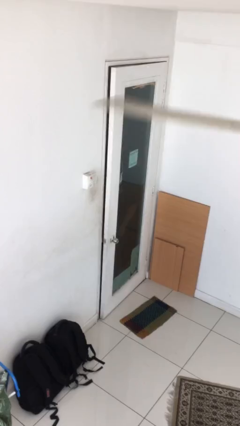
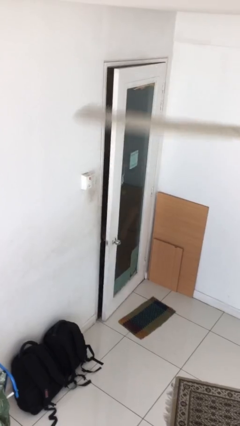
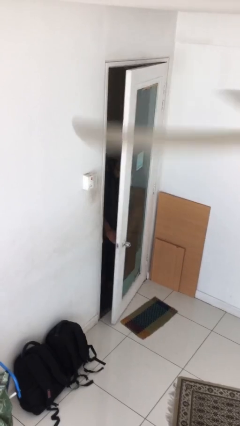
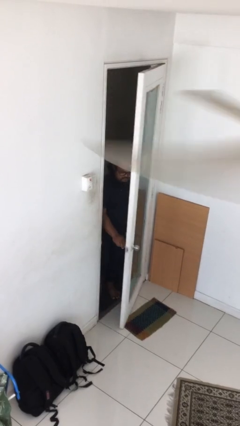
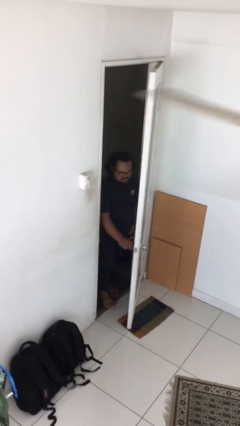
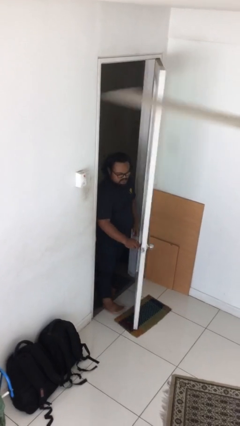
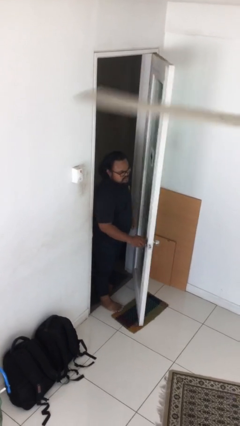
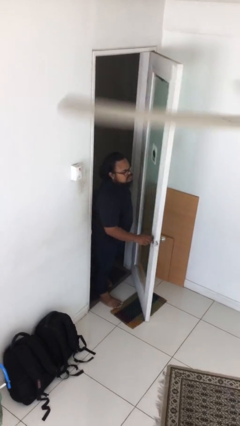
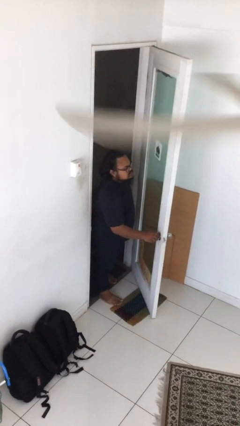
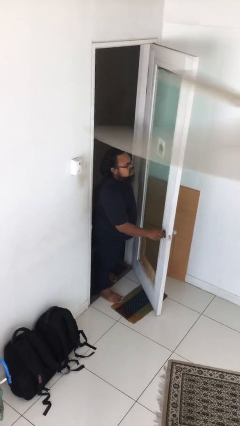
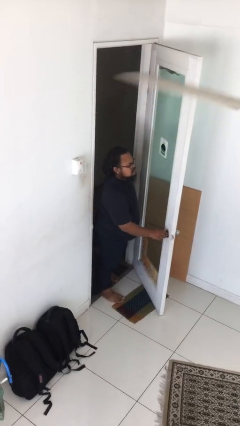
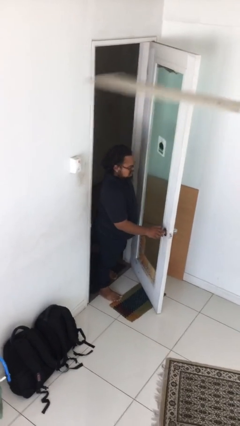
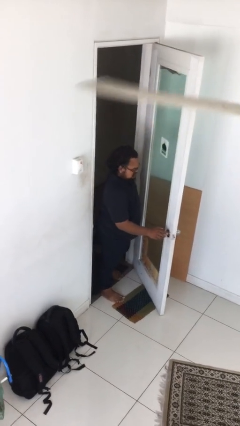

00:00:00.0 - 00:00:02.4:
person opens facility door

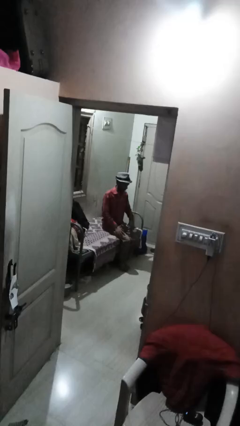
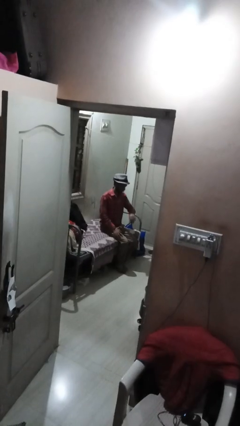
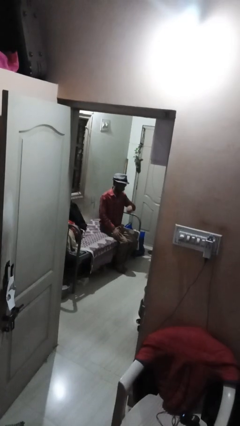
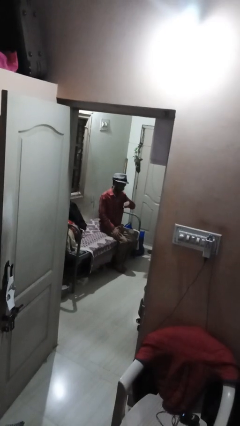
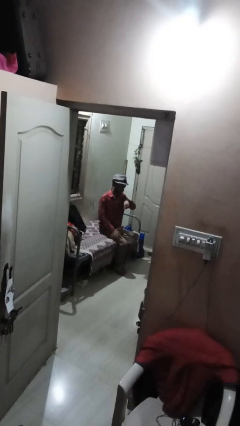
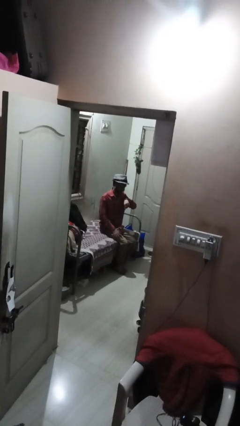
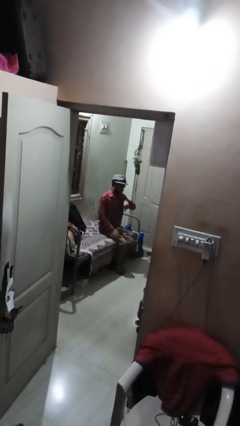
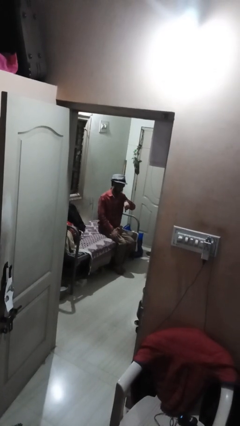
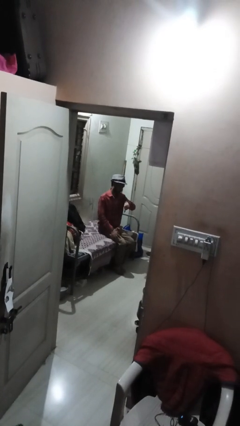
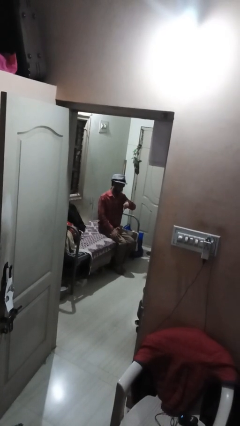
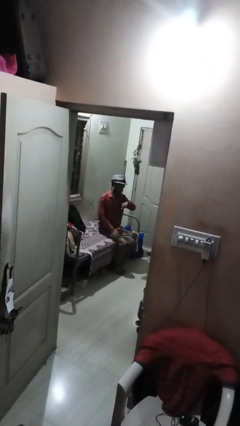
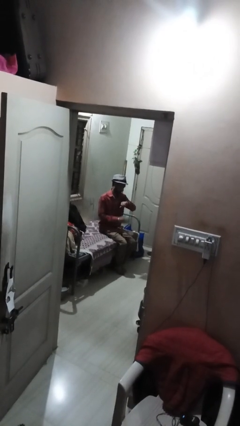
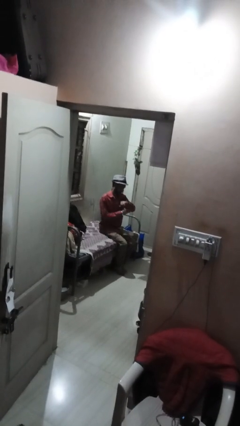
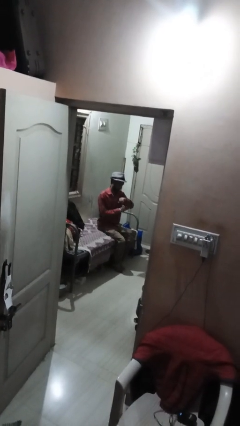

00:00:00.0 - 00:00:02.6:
person looks at wristwatch

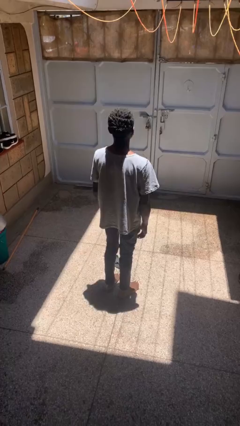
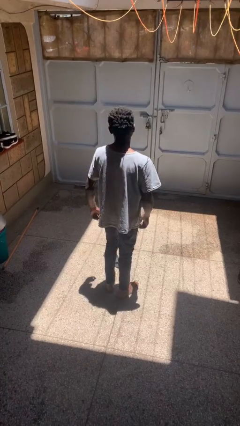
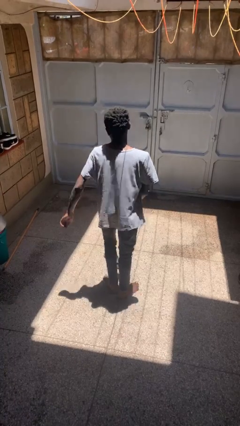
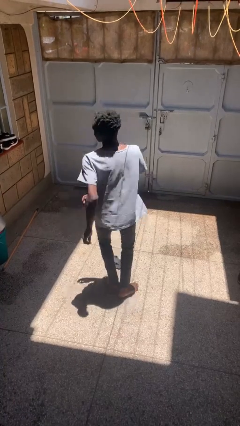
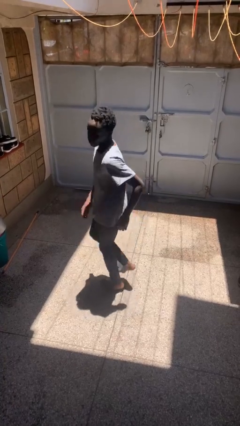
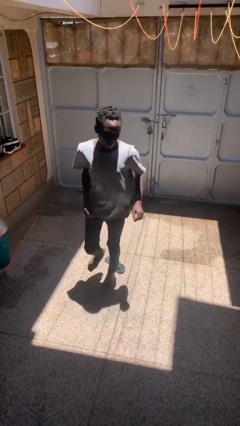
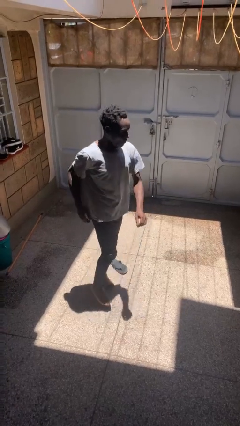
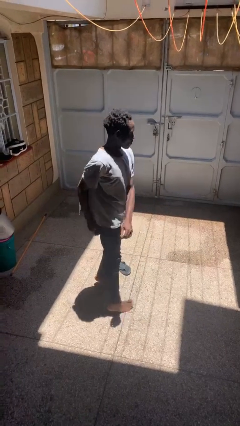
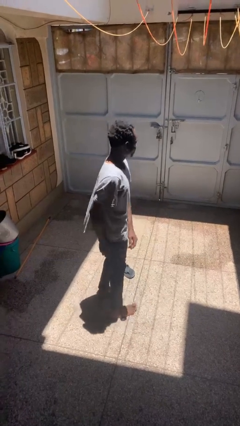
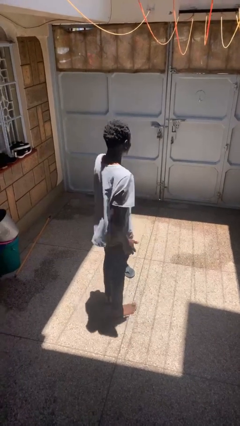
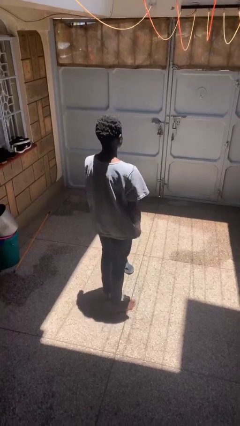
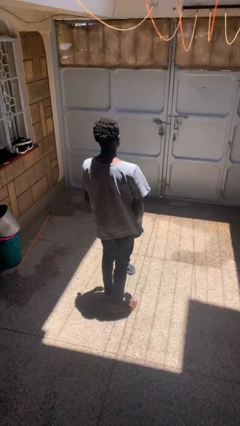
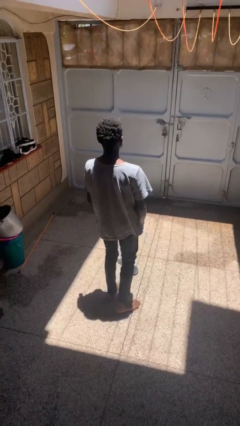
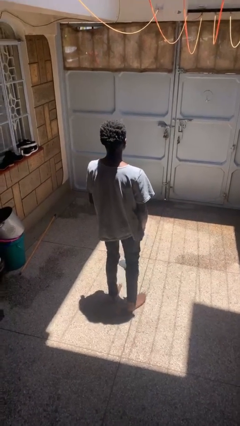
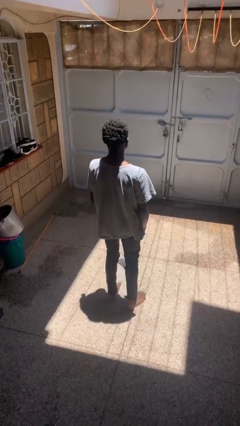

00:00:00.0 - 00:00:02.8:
person twirls

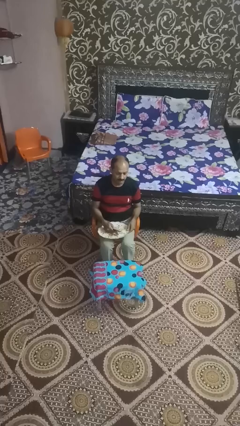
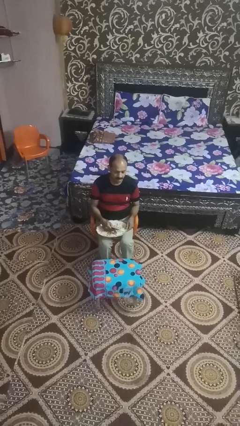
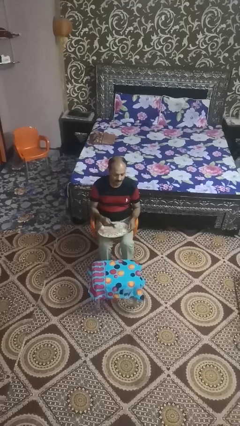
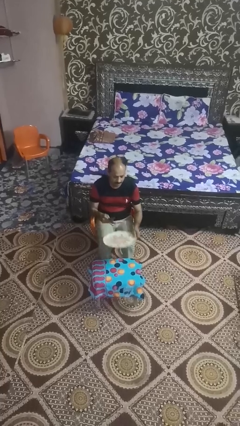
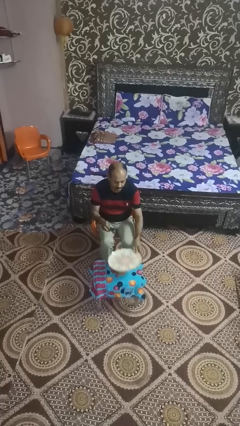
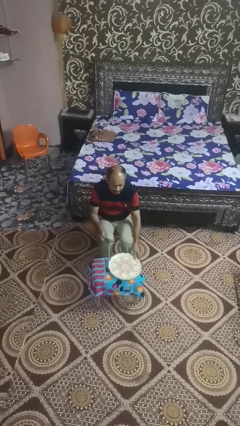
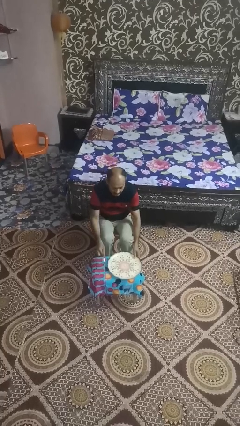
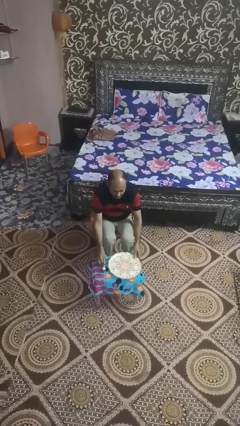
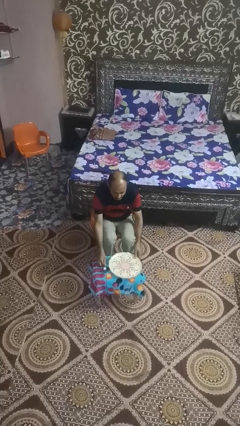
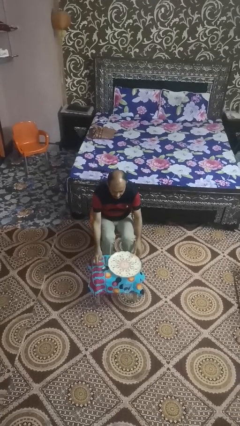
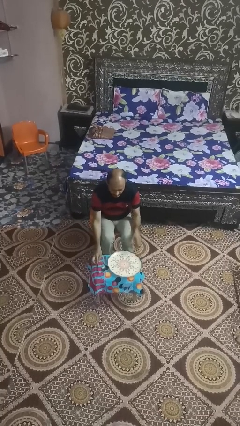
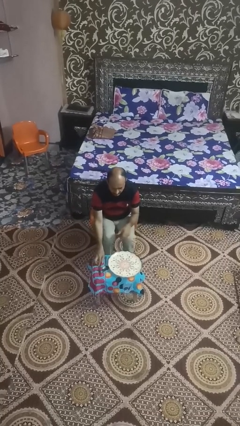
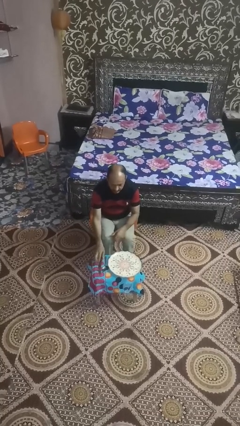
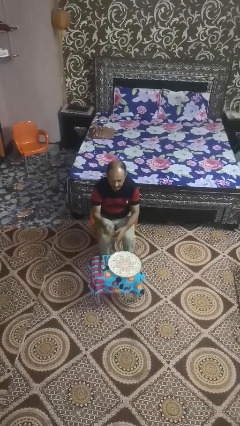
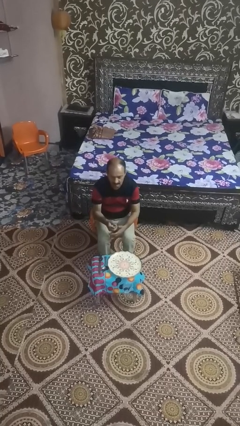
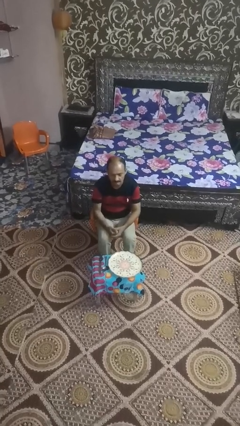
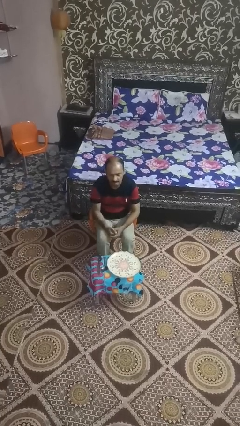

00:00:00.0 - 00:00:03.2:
person sets table

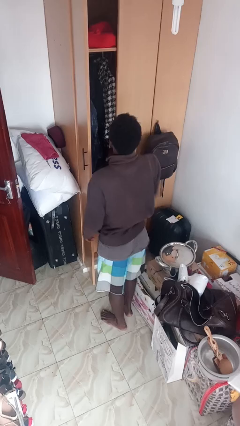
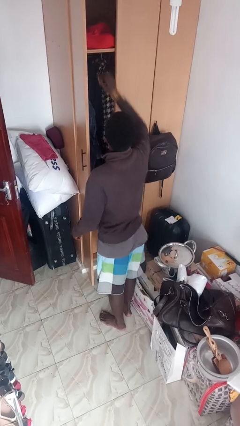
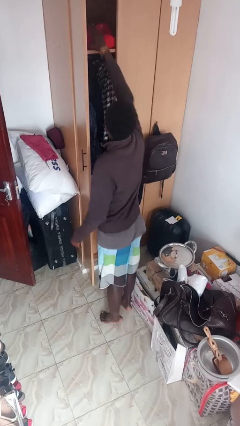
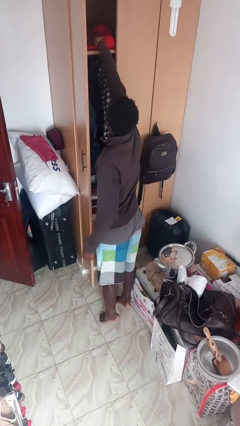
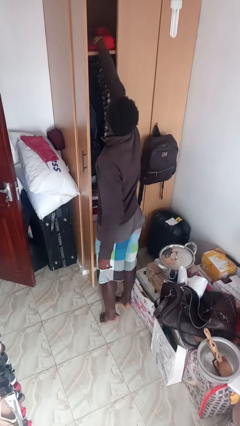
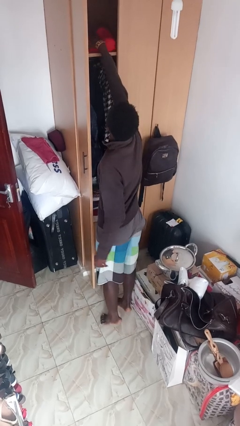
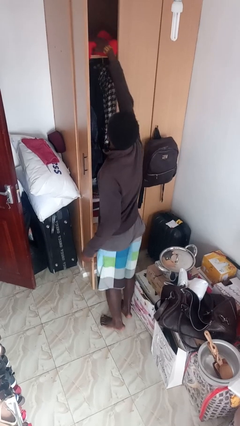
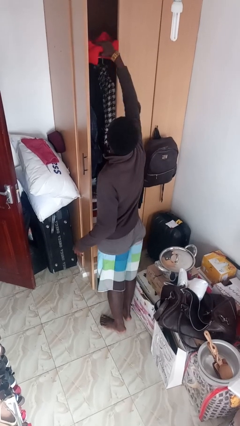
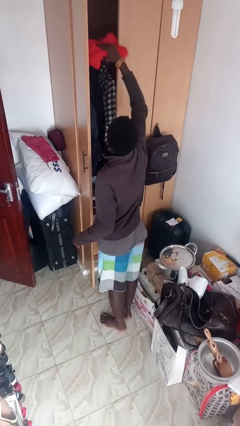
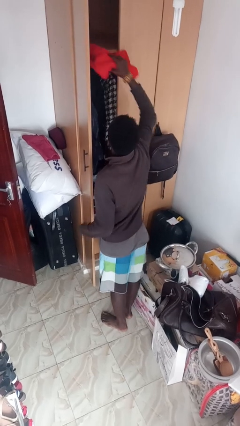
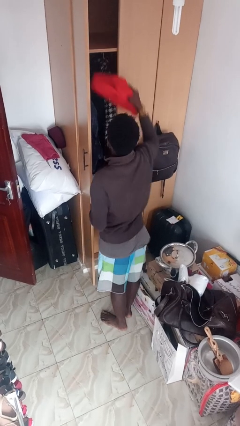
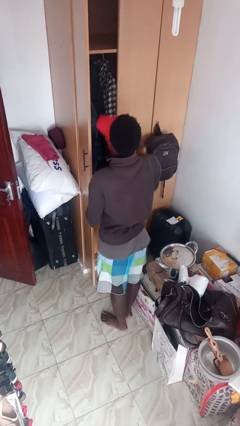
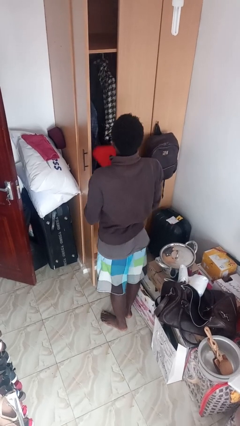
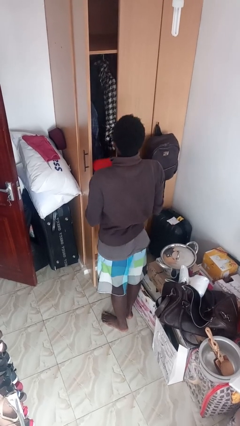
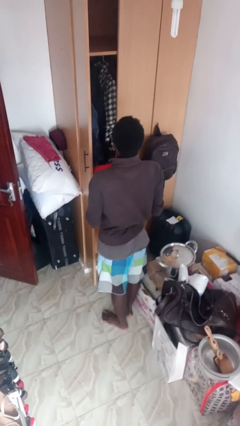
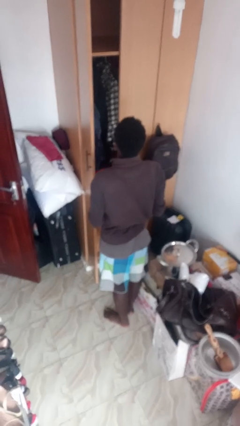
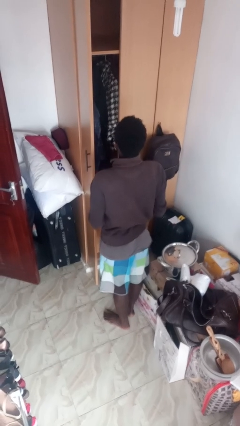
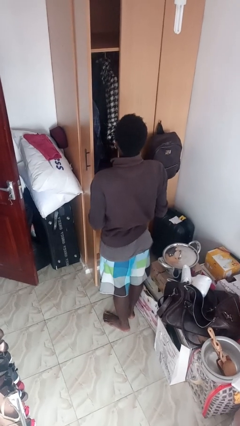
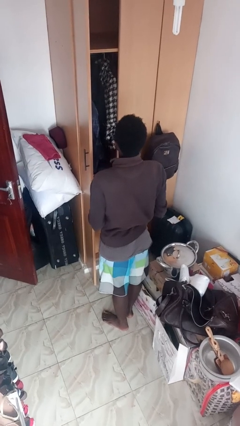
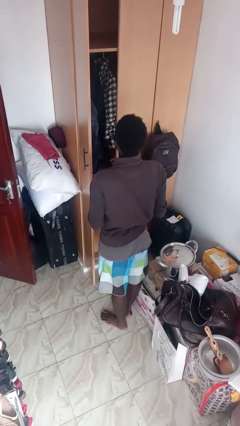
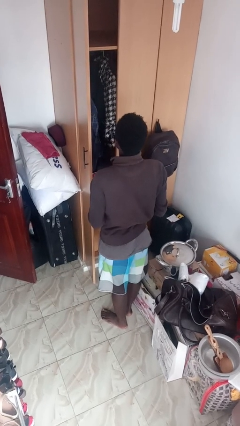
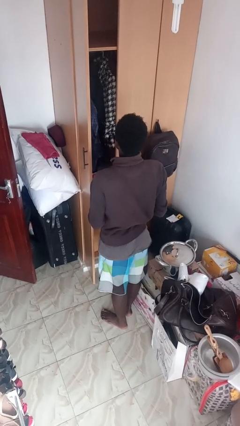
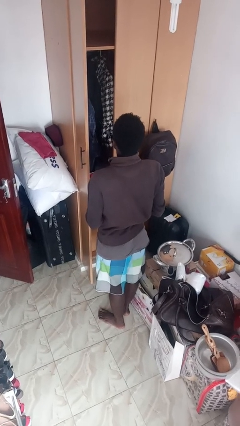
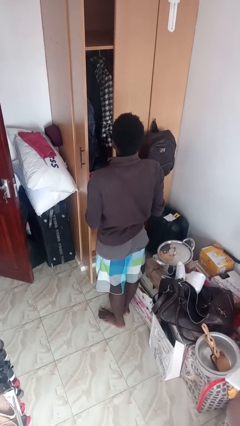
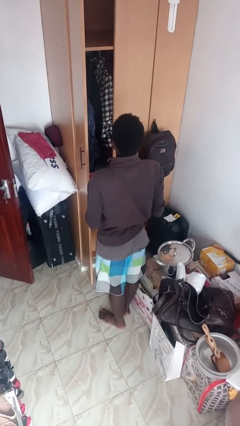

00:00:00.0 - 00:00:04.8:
person picks up object from shelf

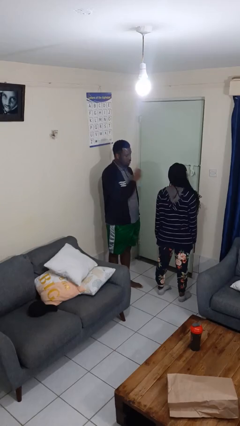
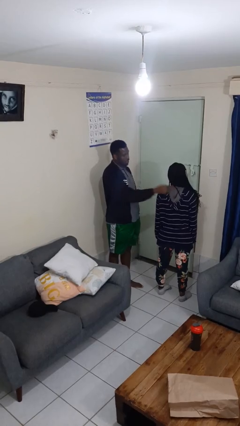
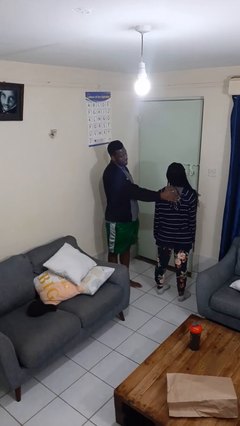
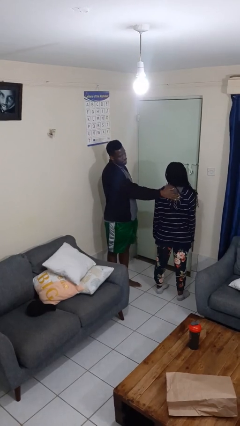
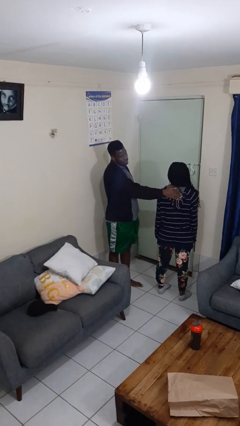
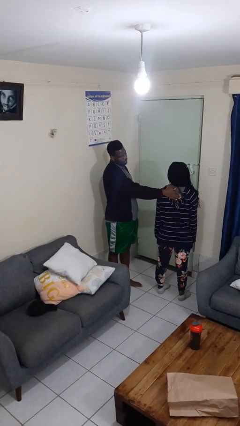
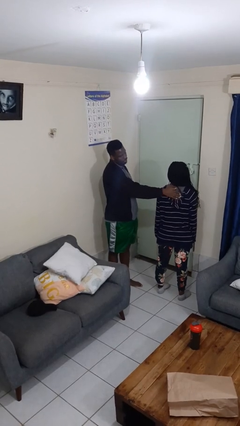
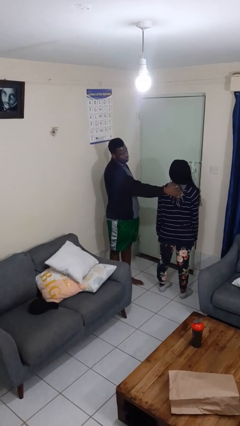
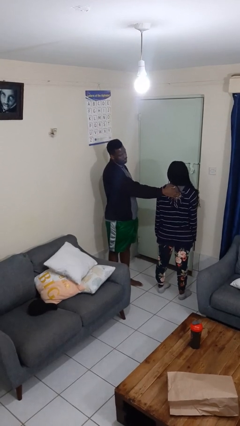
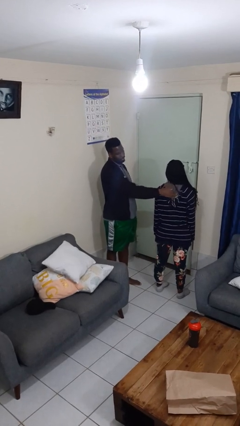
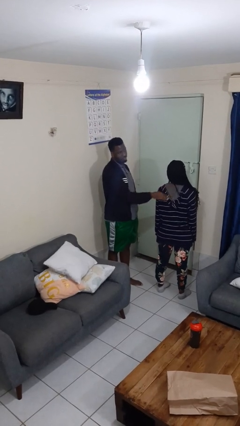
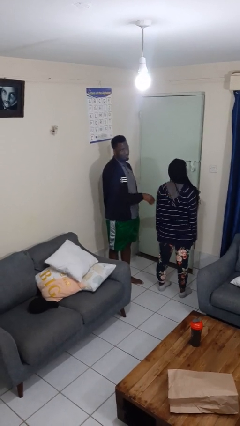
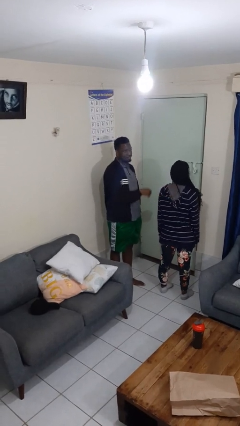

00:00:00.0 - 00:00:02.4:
person touches back of person
